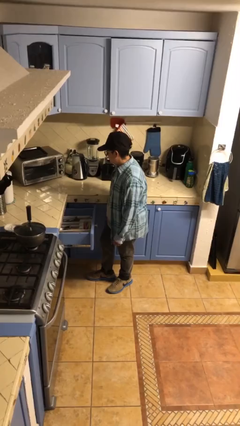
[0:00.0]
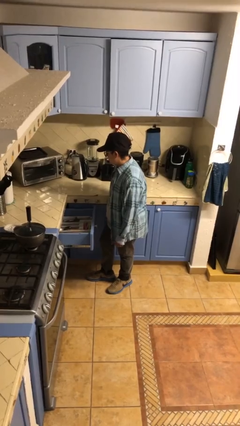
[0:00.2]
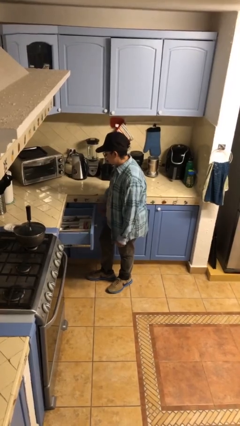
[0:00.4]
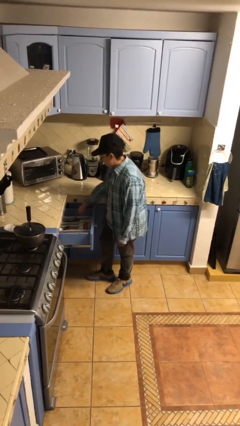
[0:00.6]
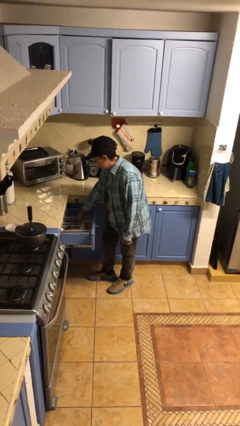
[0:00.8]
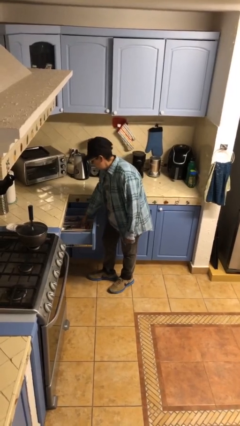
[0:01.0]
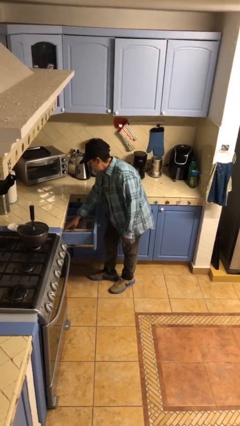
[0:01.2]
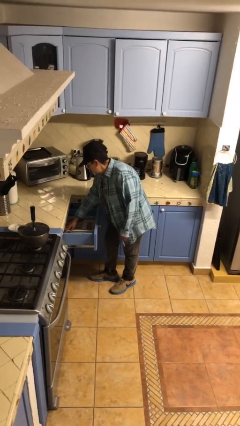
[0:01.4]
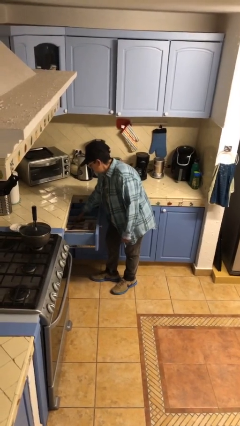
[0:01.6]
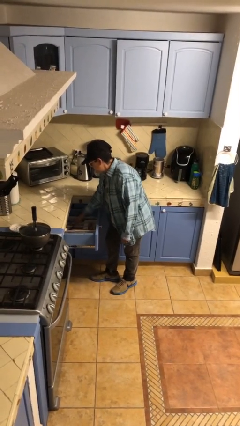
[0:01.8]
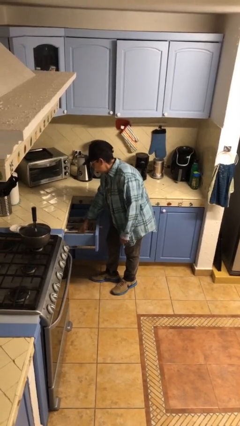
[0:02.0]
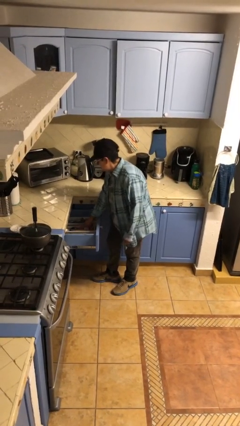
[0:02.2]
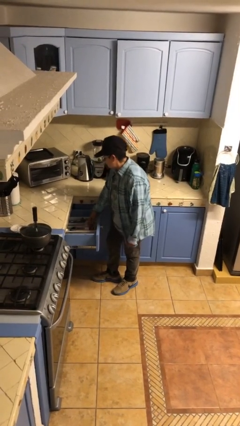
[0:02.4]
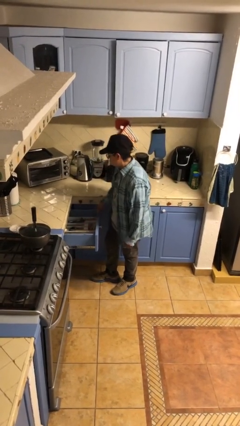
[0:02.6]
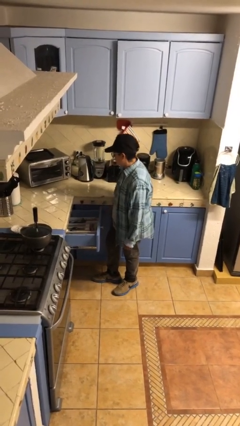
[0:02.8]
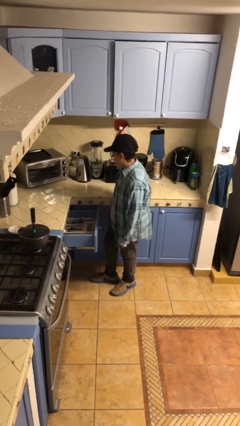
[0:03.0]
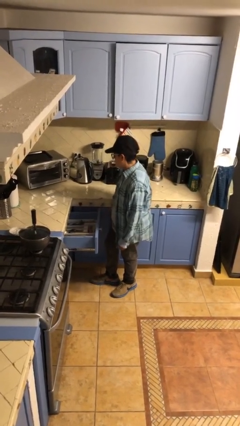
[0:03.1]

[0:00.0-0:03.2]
person searches in kitchen drawer

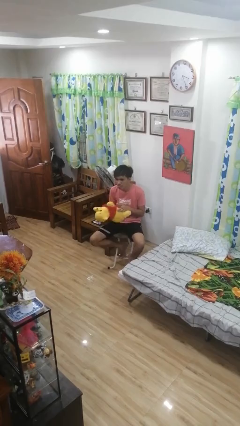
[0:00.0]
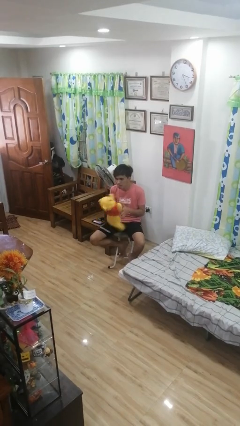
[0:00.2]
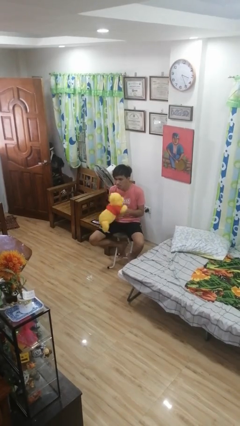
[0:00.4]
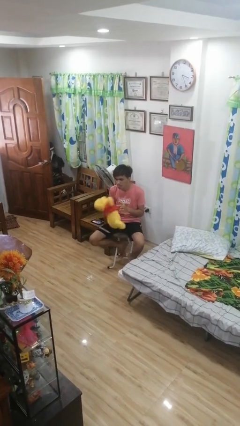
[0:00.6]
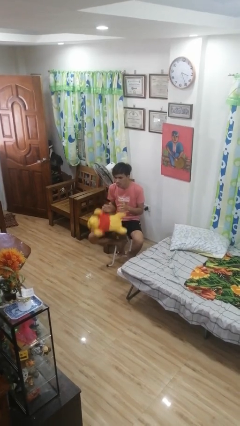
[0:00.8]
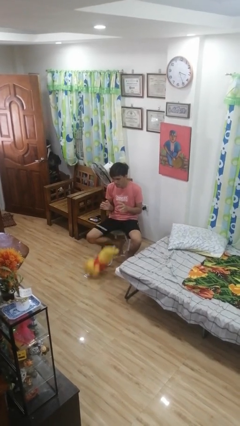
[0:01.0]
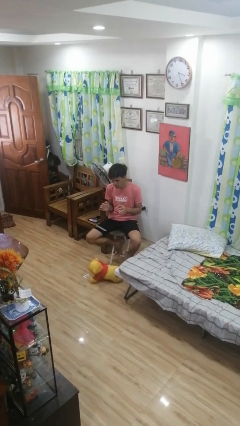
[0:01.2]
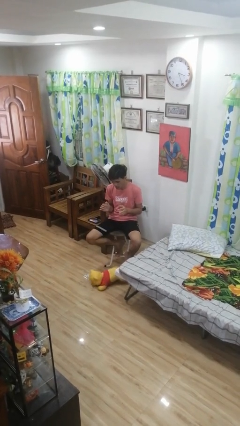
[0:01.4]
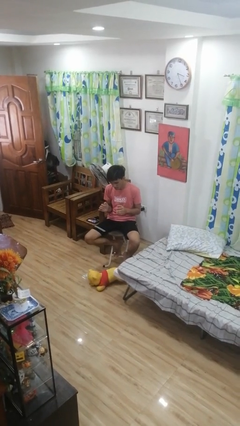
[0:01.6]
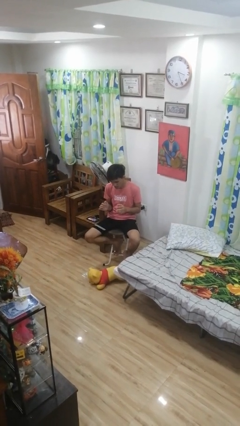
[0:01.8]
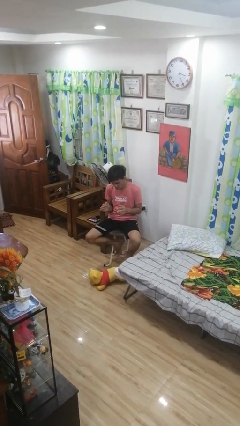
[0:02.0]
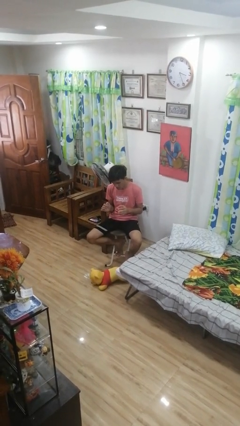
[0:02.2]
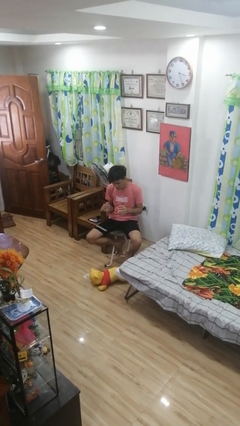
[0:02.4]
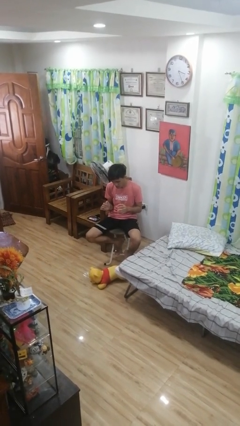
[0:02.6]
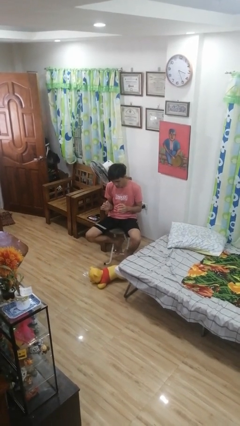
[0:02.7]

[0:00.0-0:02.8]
person drops object

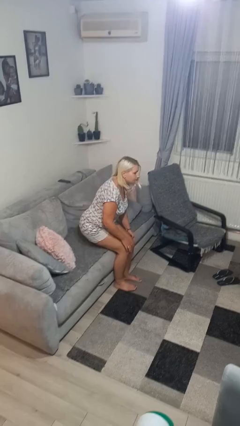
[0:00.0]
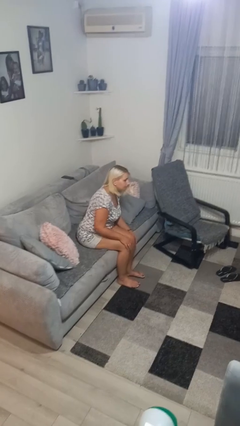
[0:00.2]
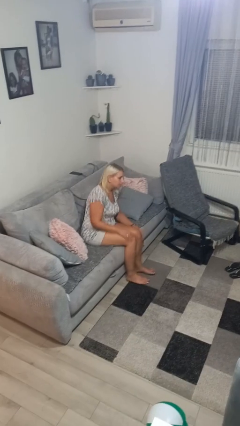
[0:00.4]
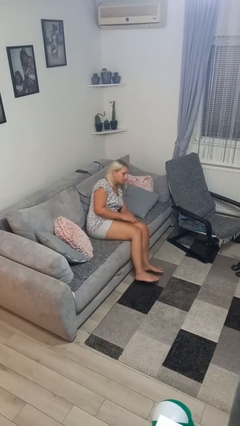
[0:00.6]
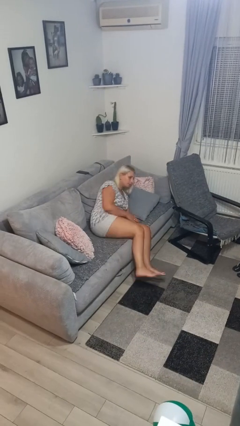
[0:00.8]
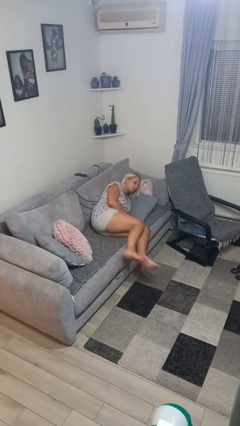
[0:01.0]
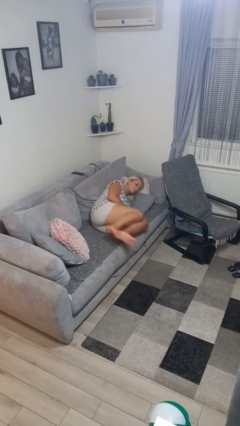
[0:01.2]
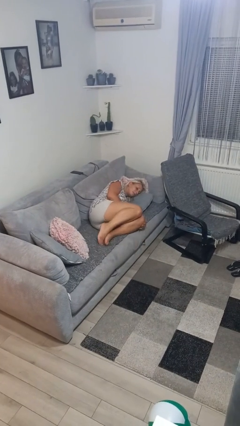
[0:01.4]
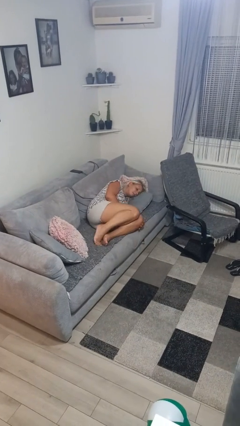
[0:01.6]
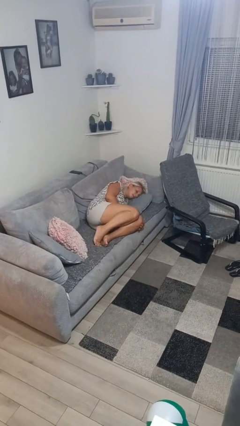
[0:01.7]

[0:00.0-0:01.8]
person lies down on couch

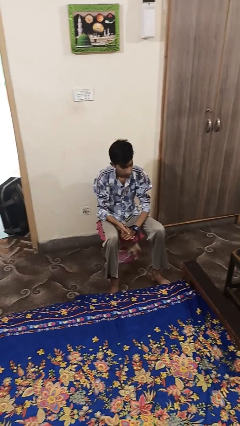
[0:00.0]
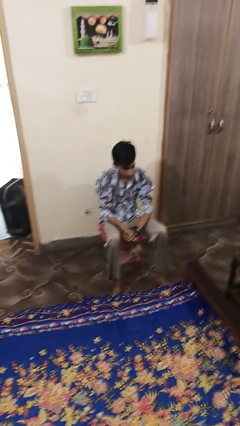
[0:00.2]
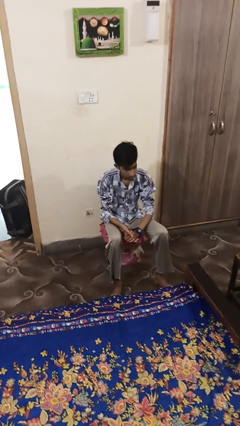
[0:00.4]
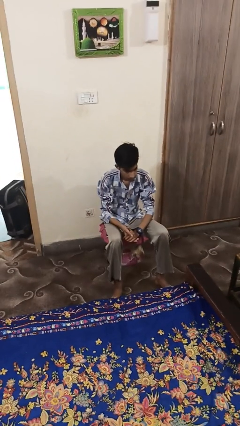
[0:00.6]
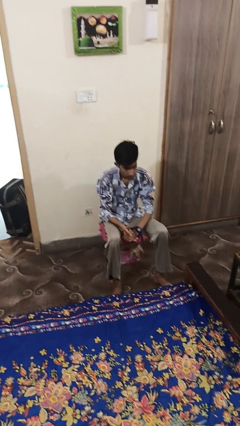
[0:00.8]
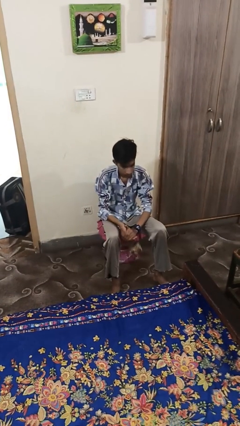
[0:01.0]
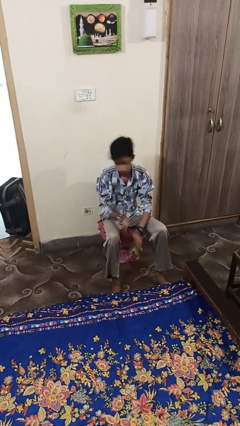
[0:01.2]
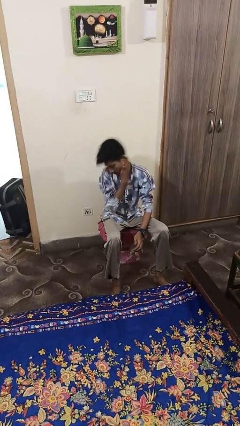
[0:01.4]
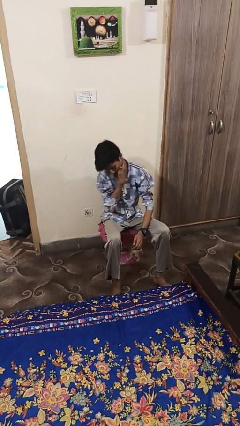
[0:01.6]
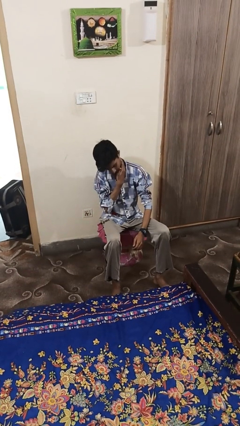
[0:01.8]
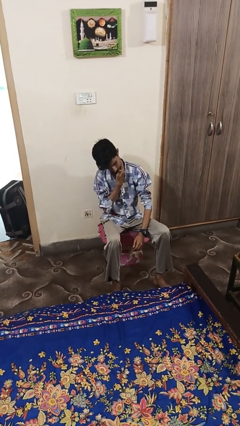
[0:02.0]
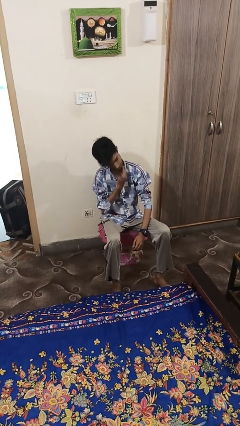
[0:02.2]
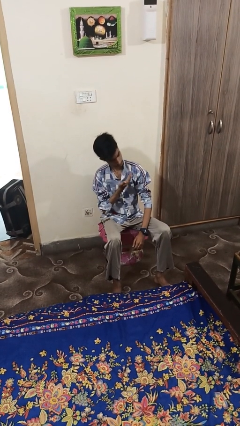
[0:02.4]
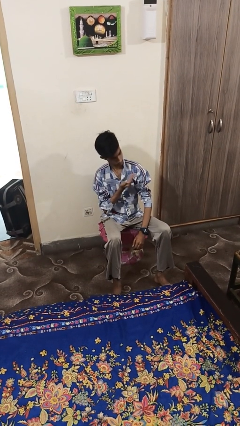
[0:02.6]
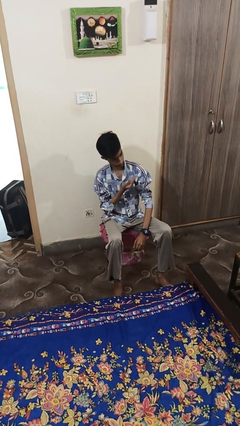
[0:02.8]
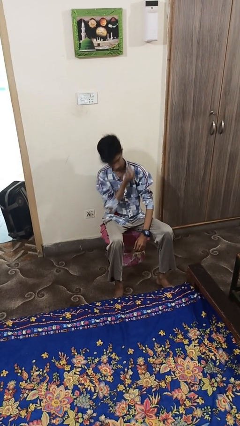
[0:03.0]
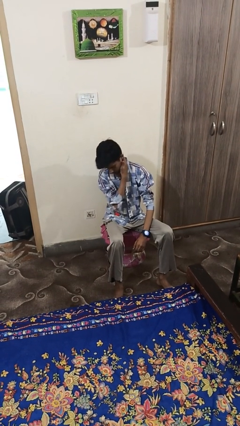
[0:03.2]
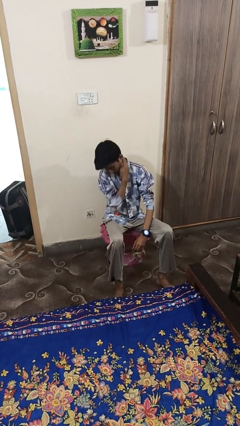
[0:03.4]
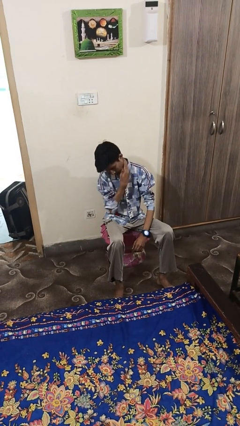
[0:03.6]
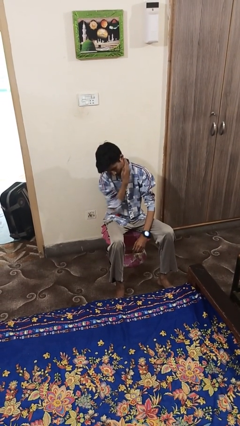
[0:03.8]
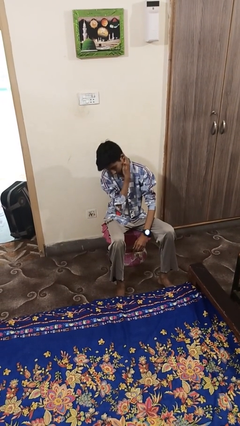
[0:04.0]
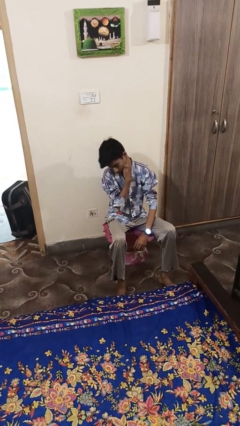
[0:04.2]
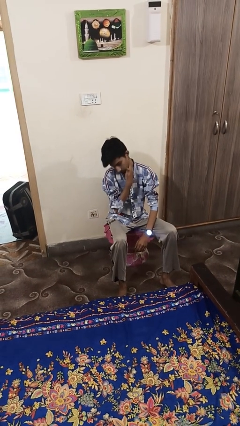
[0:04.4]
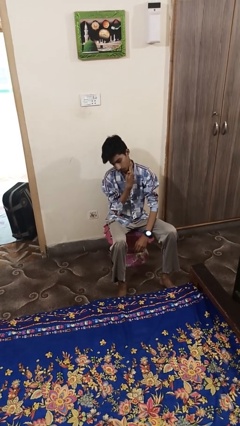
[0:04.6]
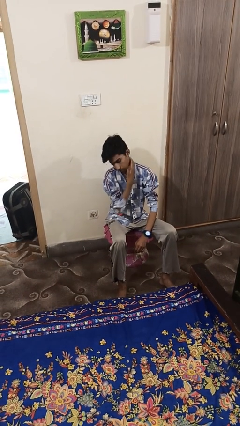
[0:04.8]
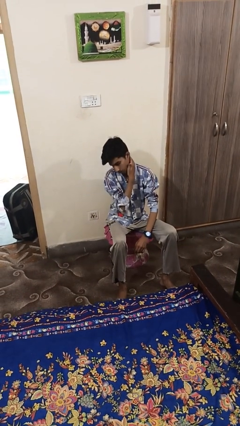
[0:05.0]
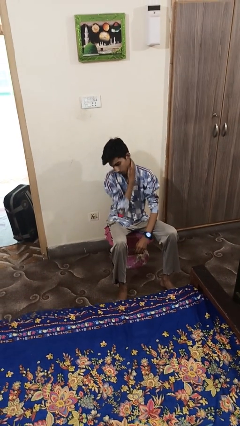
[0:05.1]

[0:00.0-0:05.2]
person swats bug

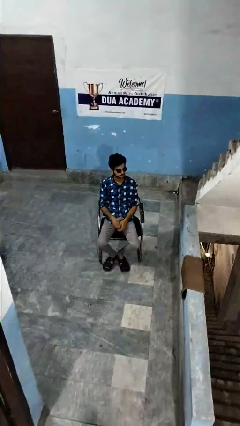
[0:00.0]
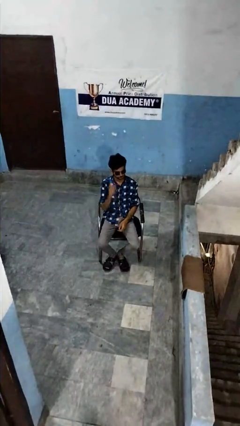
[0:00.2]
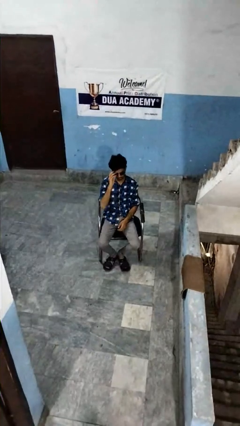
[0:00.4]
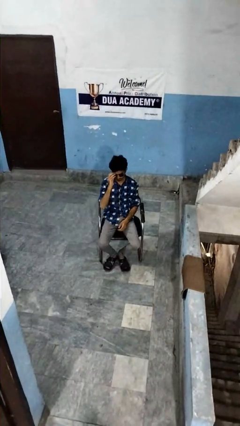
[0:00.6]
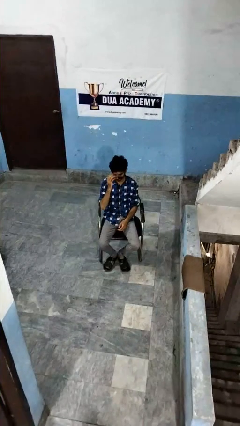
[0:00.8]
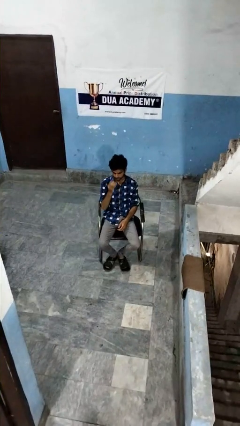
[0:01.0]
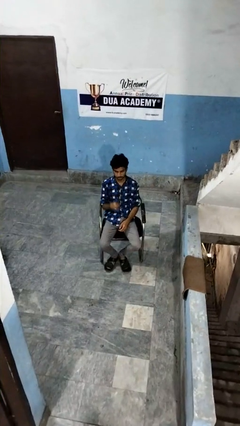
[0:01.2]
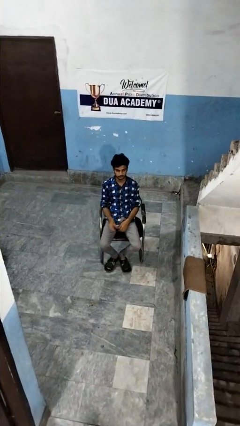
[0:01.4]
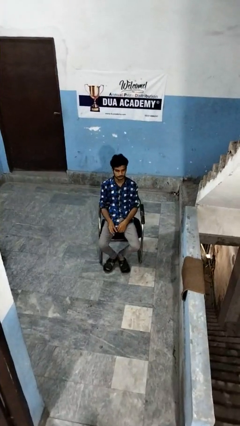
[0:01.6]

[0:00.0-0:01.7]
person takes off sunglasses

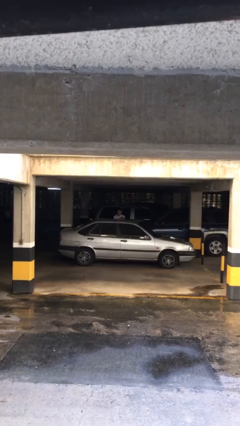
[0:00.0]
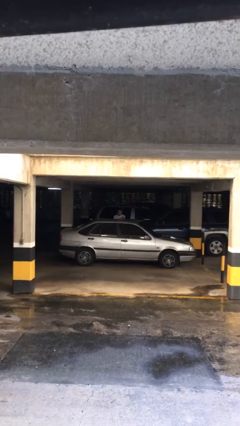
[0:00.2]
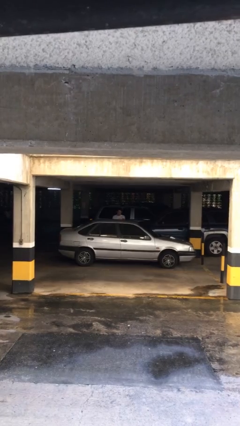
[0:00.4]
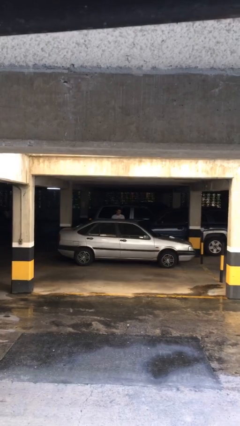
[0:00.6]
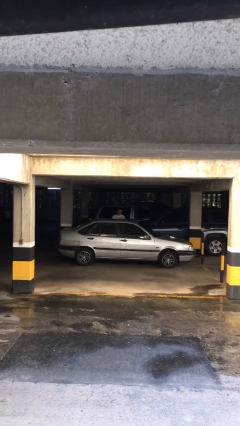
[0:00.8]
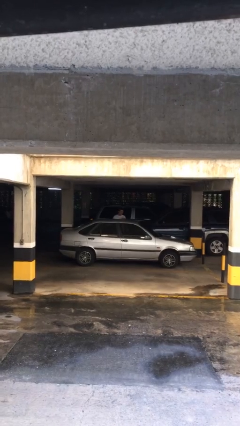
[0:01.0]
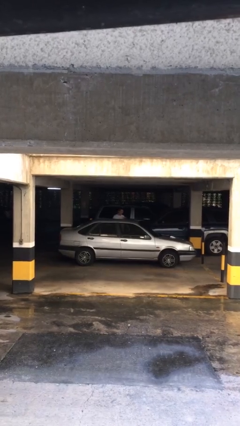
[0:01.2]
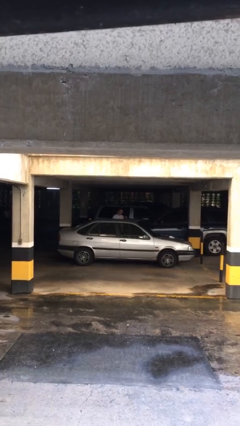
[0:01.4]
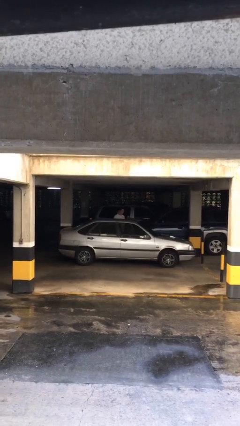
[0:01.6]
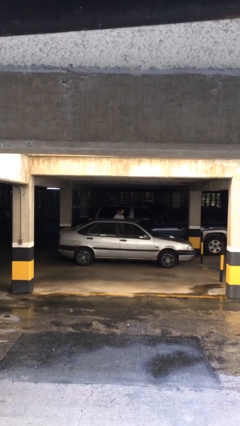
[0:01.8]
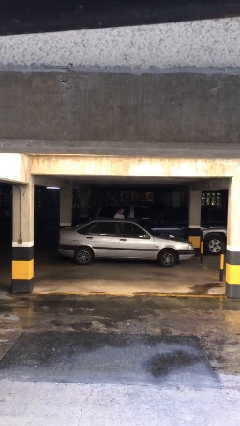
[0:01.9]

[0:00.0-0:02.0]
person opens car door

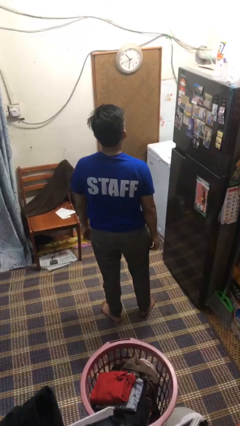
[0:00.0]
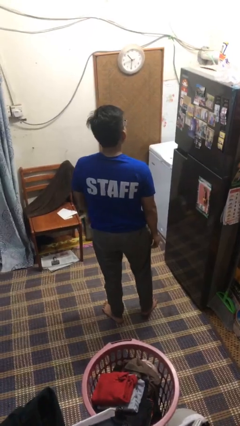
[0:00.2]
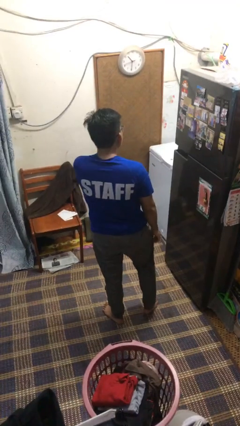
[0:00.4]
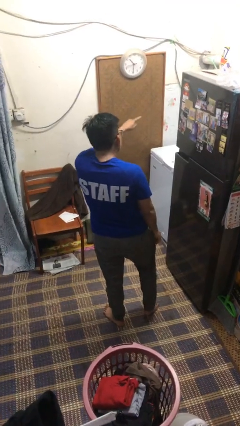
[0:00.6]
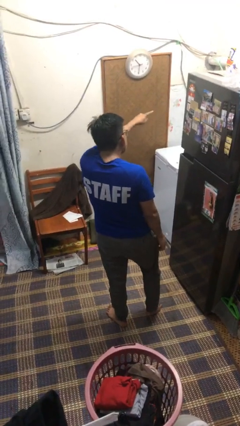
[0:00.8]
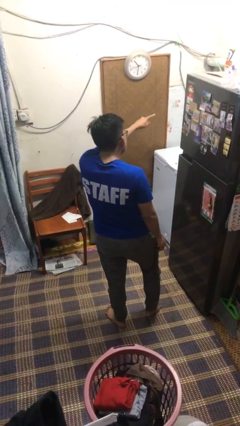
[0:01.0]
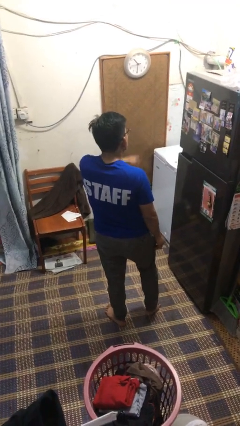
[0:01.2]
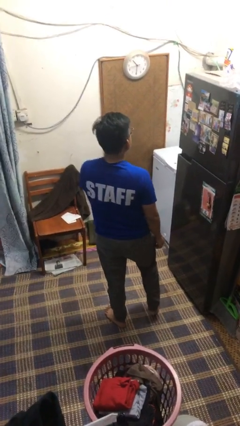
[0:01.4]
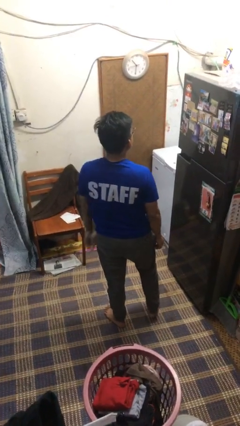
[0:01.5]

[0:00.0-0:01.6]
person points at person
